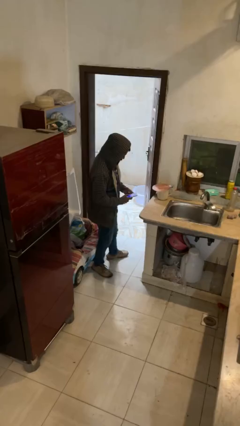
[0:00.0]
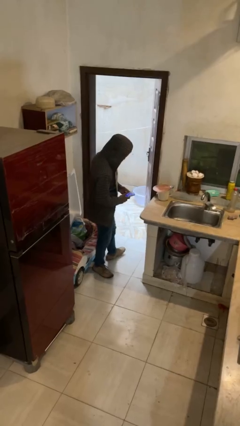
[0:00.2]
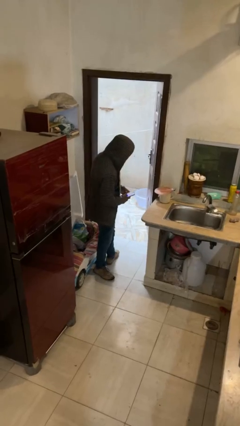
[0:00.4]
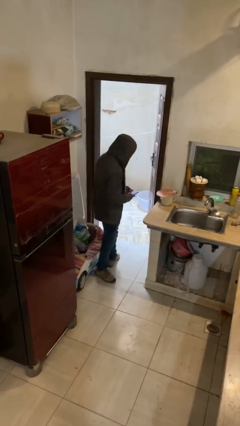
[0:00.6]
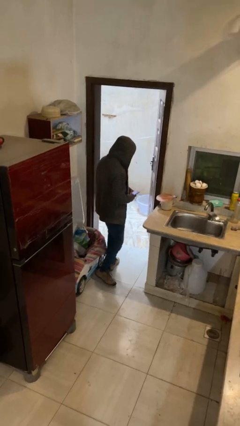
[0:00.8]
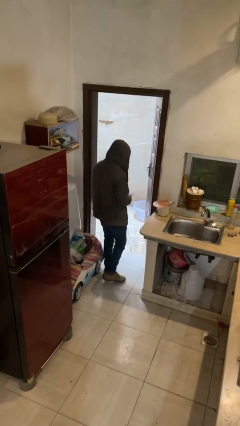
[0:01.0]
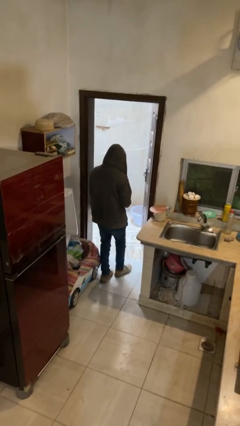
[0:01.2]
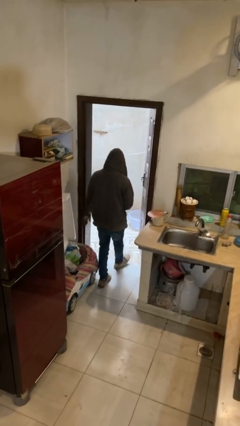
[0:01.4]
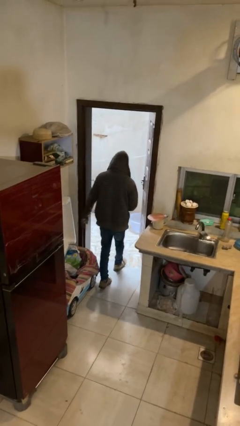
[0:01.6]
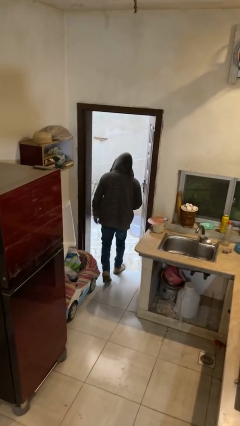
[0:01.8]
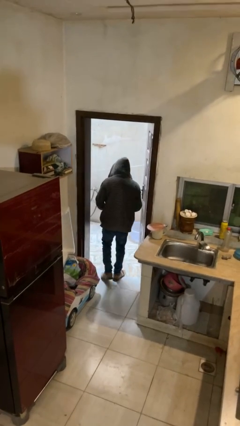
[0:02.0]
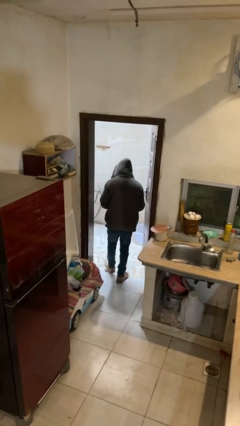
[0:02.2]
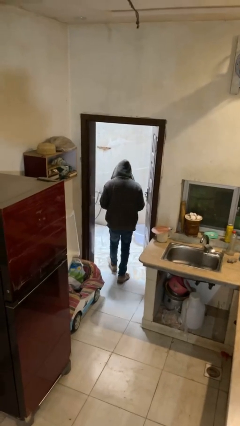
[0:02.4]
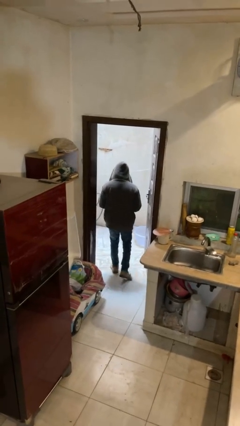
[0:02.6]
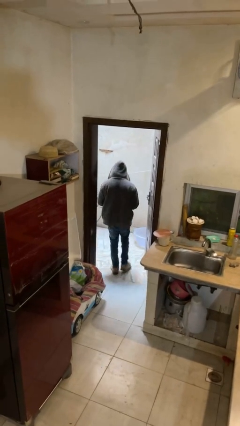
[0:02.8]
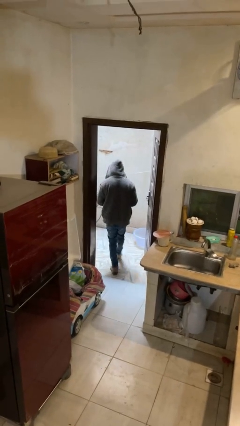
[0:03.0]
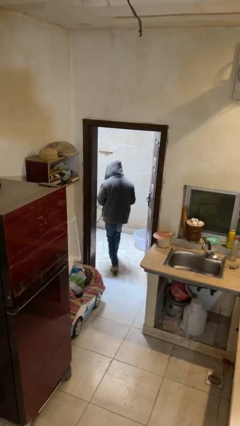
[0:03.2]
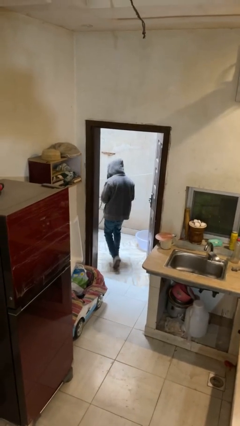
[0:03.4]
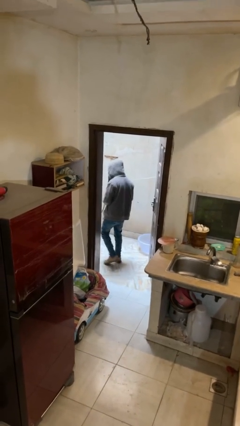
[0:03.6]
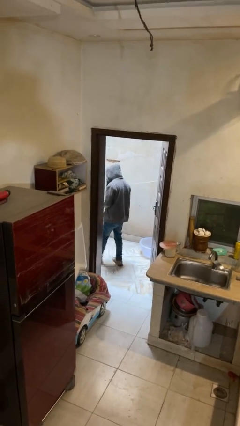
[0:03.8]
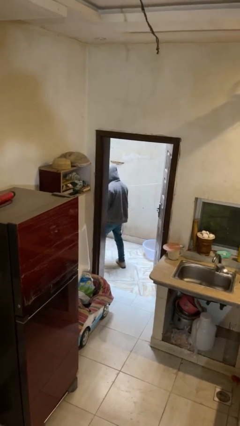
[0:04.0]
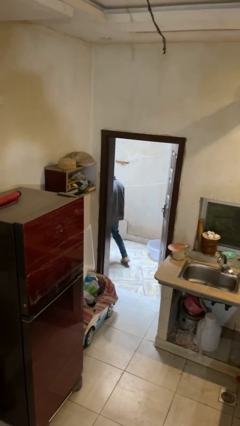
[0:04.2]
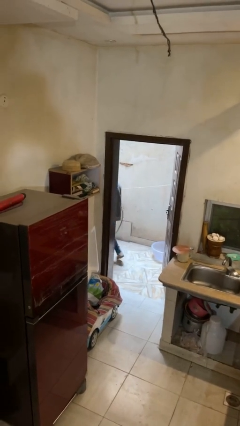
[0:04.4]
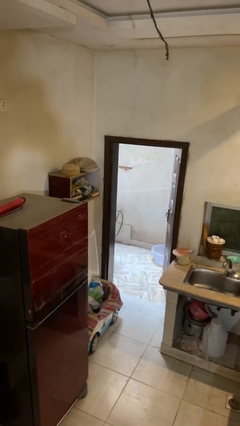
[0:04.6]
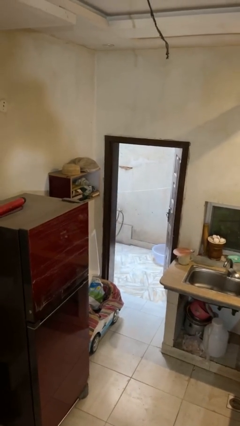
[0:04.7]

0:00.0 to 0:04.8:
person exits scene through structure

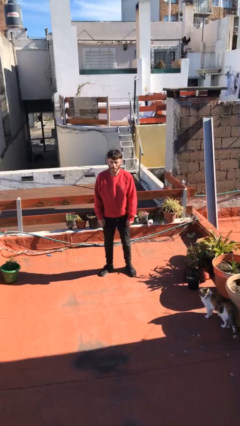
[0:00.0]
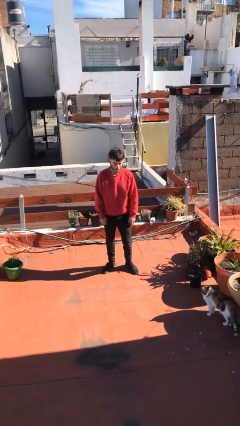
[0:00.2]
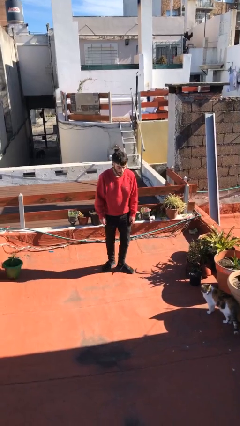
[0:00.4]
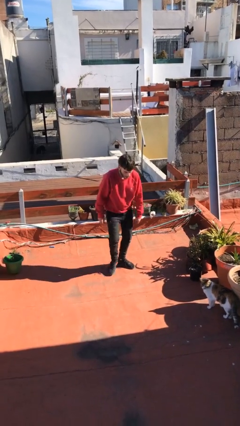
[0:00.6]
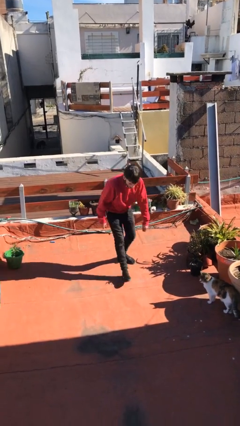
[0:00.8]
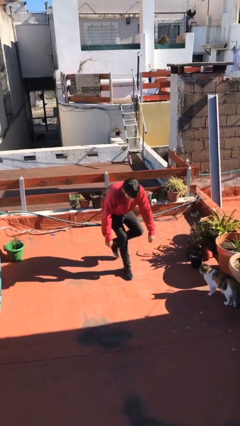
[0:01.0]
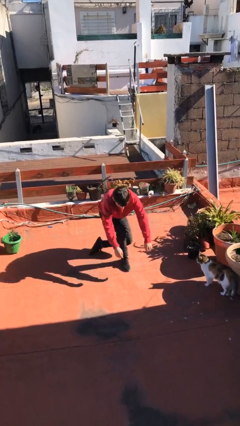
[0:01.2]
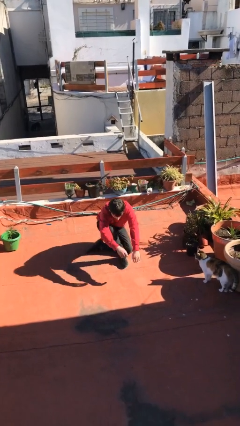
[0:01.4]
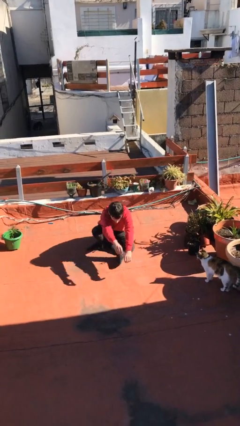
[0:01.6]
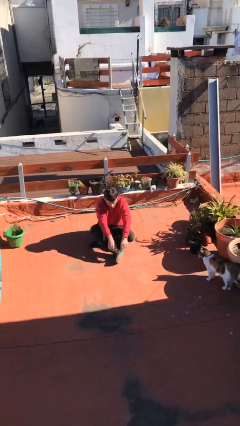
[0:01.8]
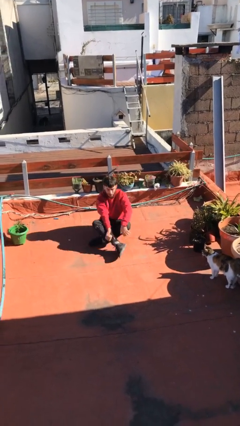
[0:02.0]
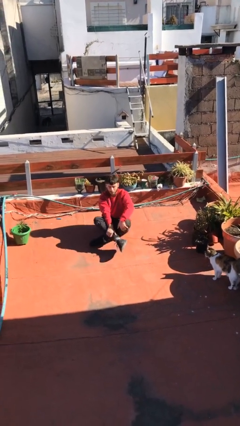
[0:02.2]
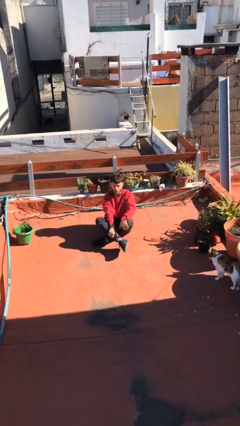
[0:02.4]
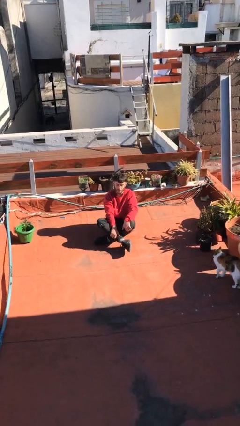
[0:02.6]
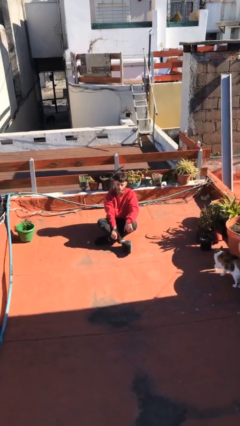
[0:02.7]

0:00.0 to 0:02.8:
person sits crisscross

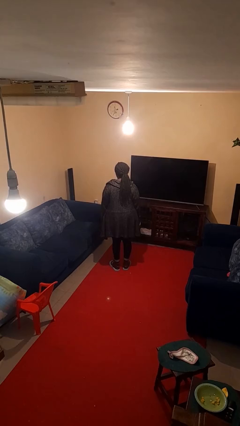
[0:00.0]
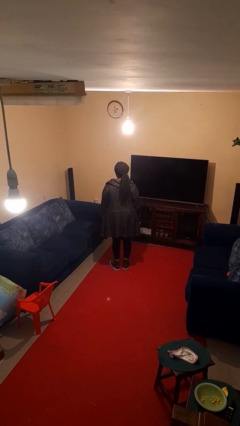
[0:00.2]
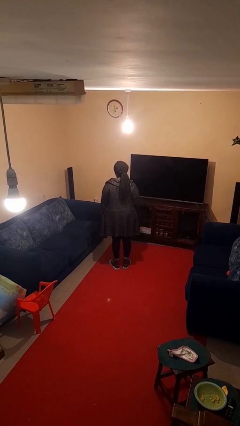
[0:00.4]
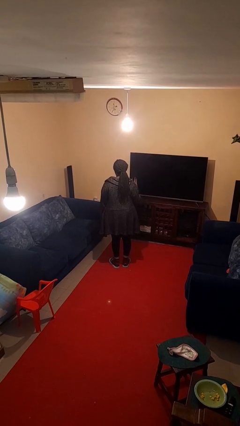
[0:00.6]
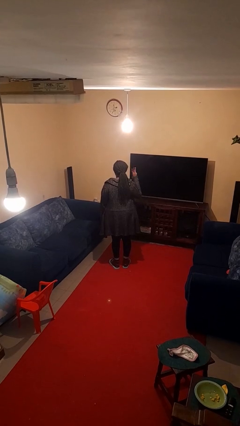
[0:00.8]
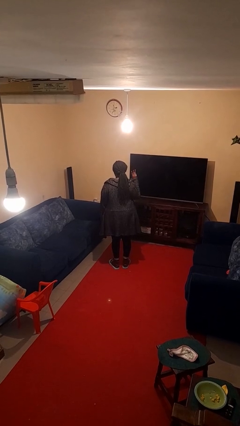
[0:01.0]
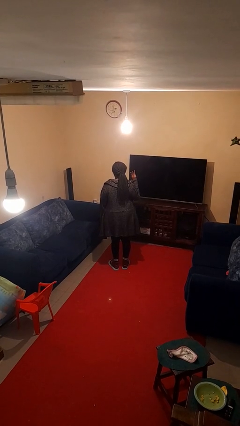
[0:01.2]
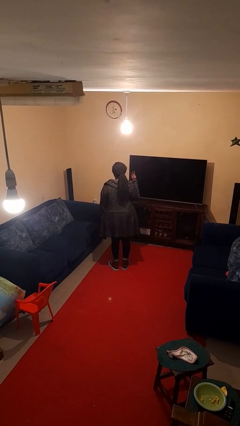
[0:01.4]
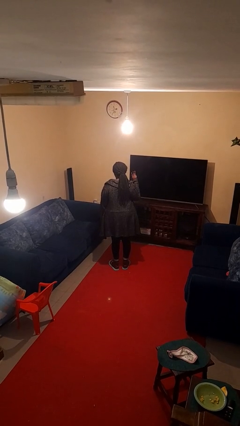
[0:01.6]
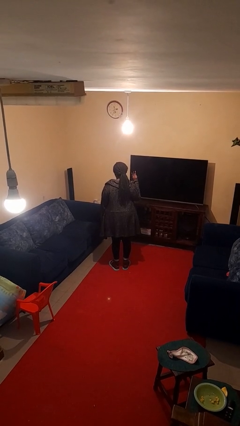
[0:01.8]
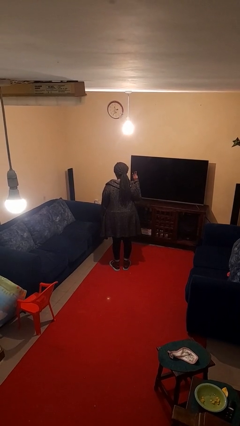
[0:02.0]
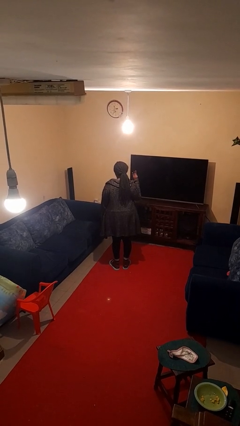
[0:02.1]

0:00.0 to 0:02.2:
person gestures number three

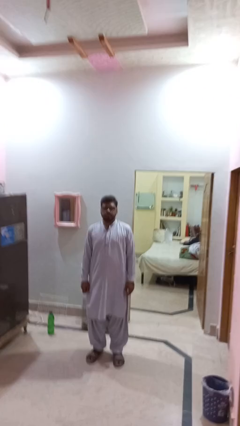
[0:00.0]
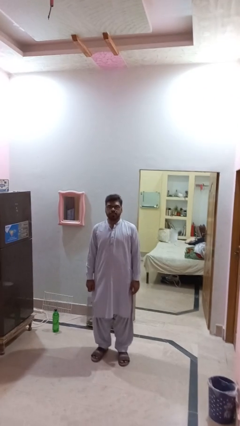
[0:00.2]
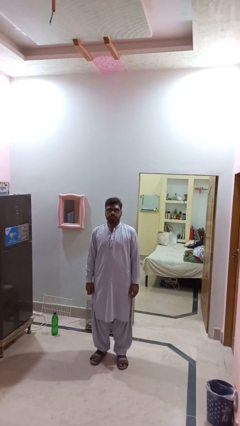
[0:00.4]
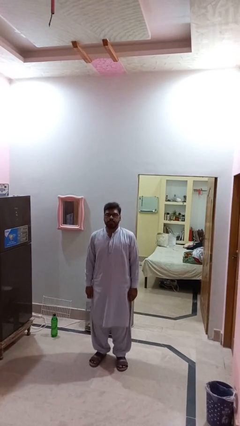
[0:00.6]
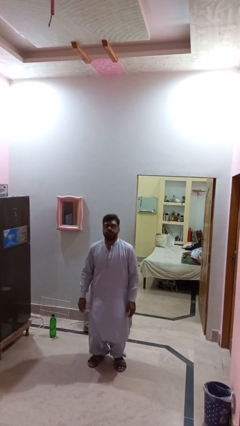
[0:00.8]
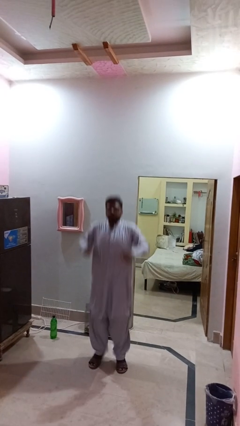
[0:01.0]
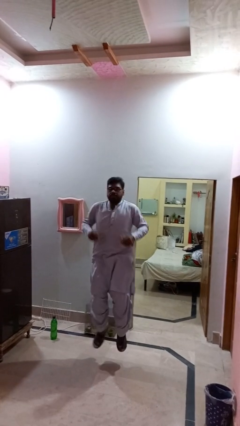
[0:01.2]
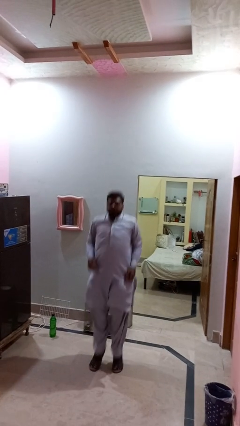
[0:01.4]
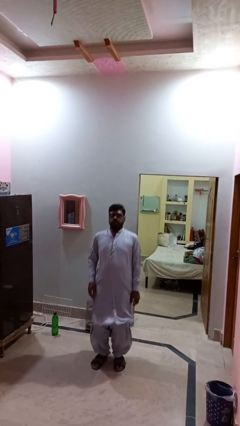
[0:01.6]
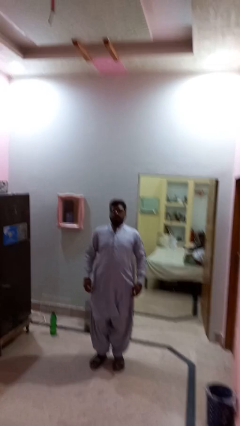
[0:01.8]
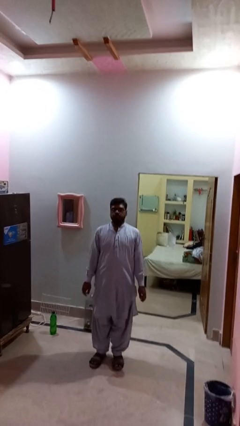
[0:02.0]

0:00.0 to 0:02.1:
person jumps

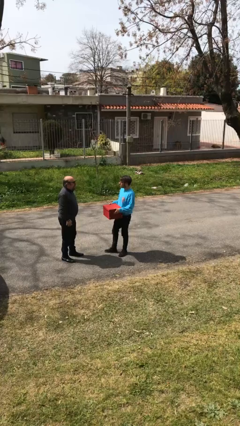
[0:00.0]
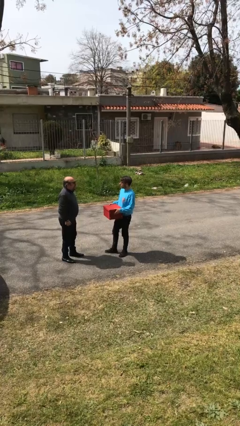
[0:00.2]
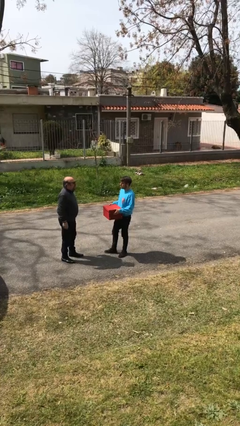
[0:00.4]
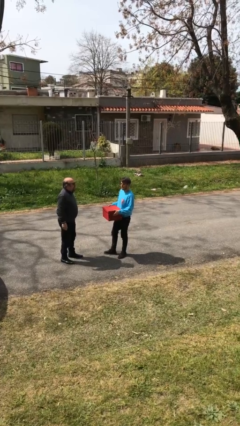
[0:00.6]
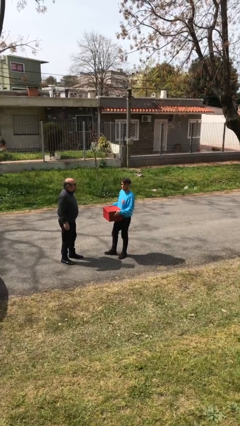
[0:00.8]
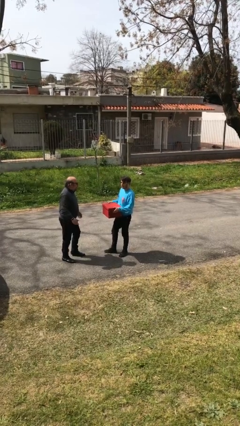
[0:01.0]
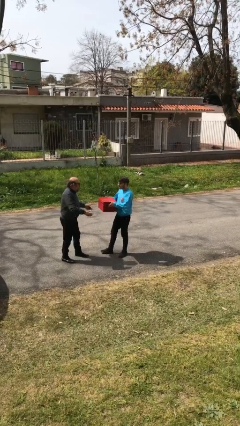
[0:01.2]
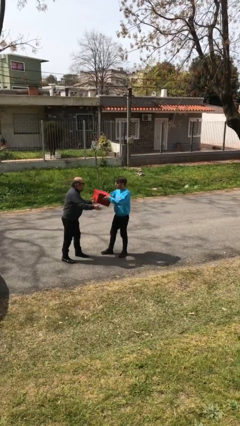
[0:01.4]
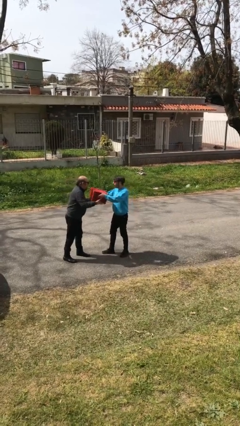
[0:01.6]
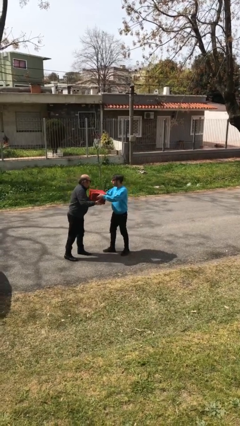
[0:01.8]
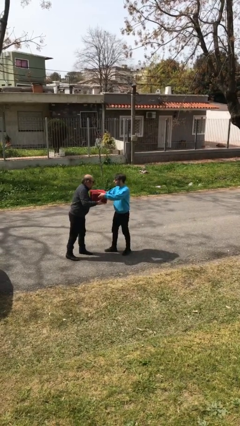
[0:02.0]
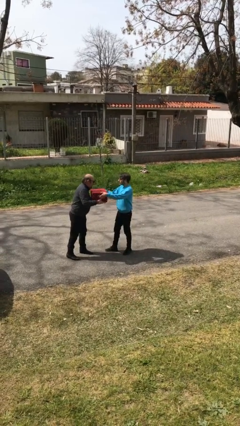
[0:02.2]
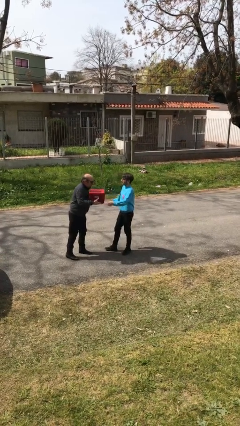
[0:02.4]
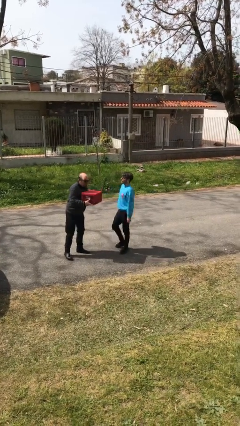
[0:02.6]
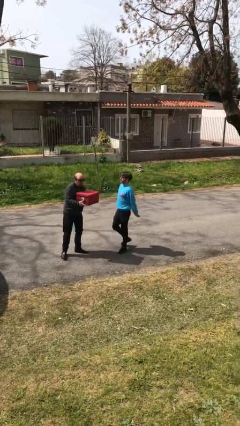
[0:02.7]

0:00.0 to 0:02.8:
person transfers object to person

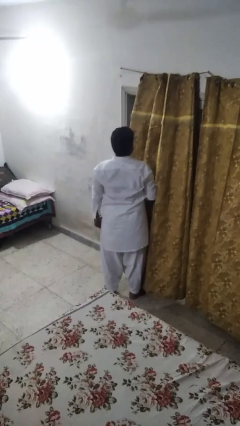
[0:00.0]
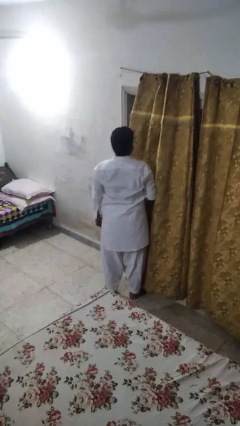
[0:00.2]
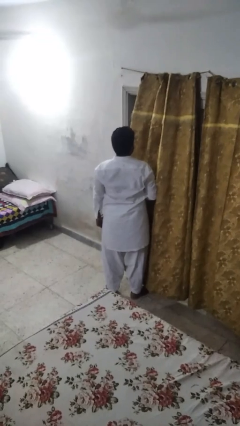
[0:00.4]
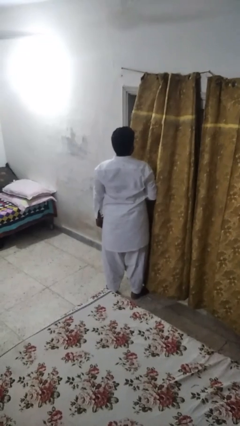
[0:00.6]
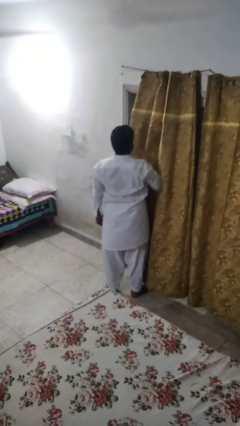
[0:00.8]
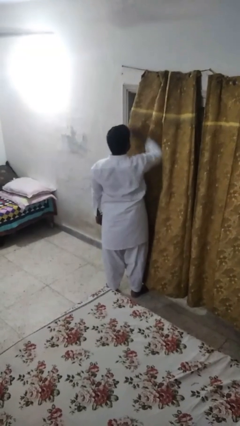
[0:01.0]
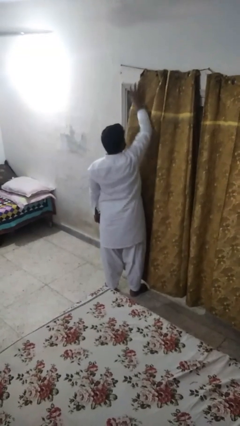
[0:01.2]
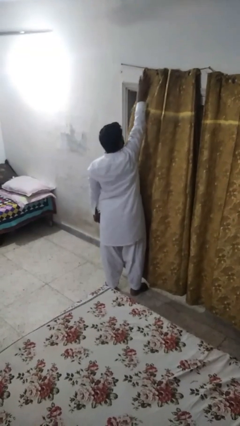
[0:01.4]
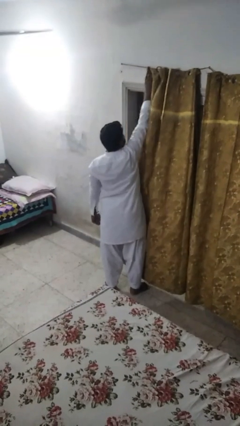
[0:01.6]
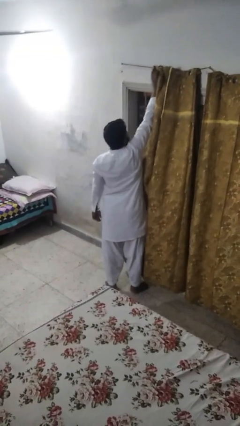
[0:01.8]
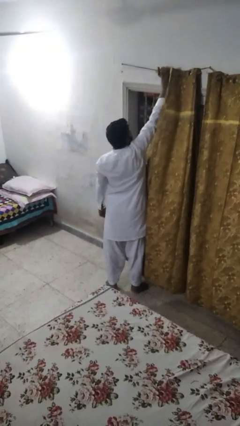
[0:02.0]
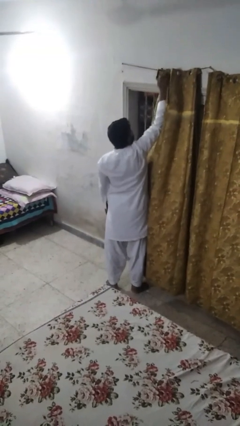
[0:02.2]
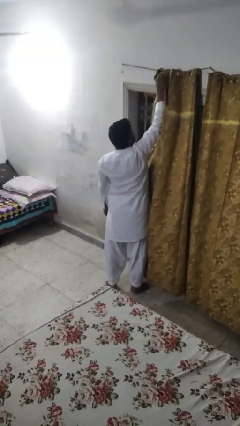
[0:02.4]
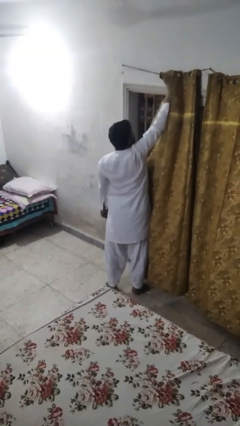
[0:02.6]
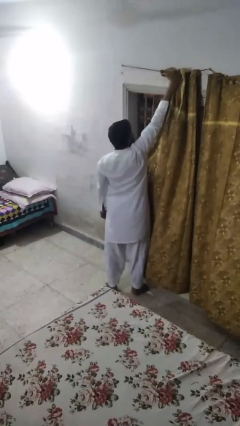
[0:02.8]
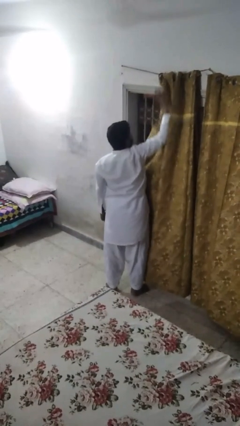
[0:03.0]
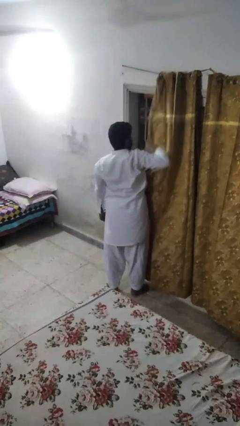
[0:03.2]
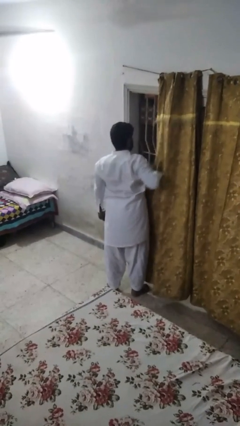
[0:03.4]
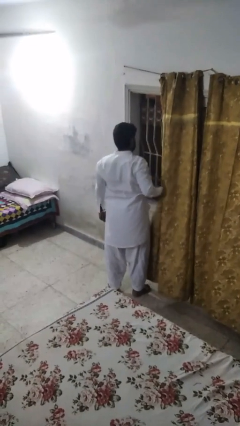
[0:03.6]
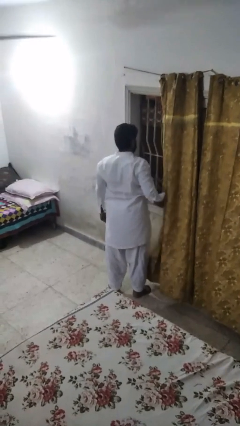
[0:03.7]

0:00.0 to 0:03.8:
person opens curtains
